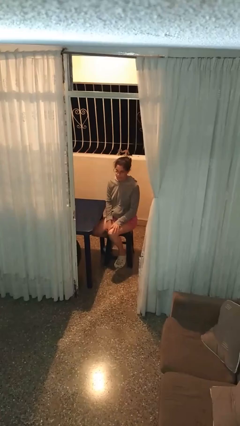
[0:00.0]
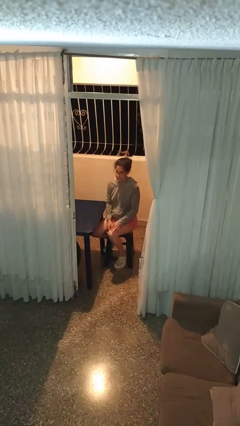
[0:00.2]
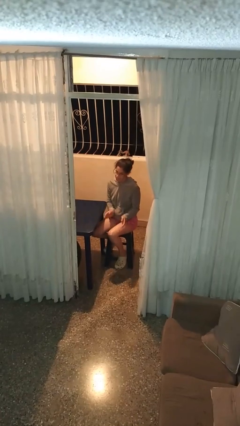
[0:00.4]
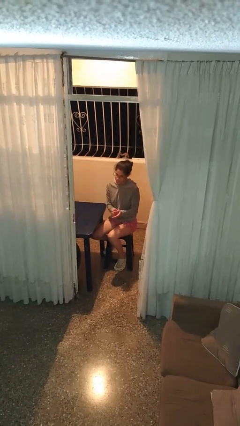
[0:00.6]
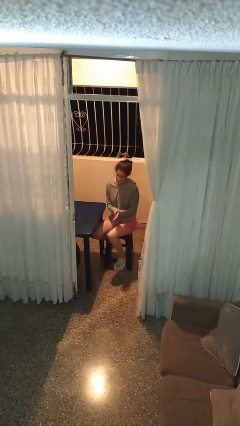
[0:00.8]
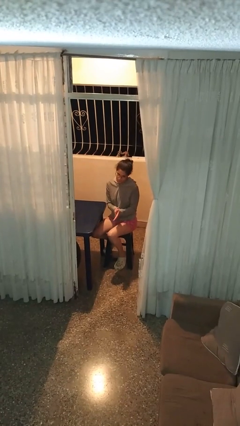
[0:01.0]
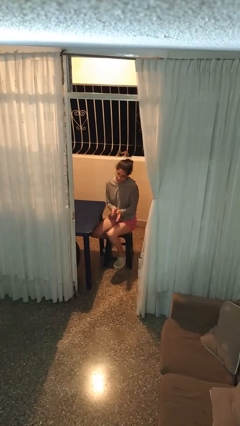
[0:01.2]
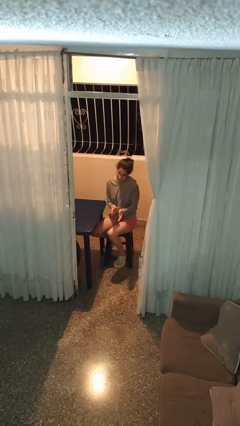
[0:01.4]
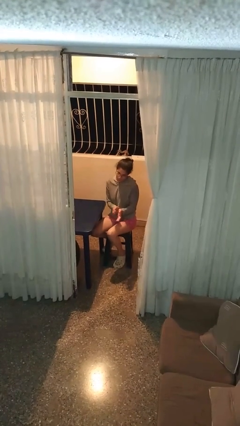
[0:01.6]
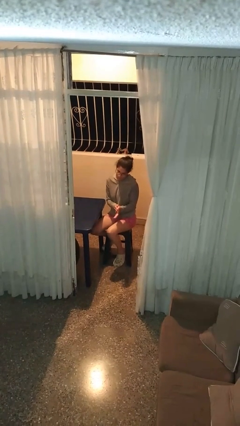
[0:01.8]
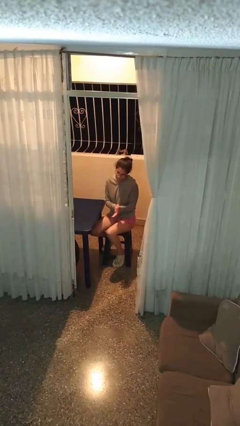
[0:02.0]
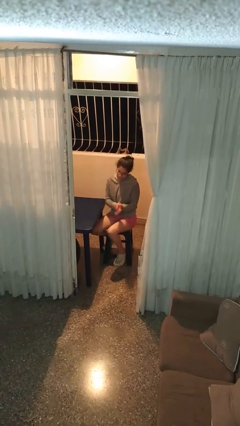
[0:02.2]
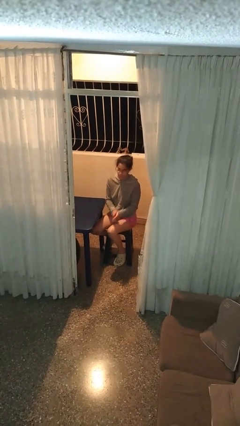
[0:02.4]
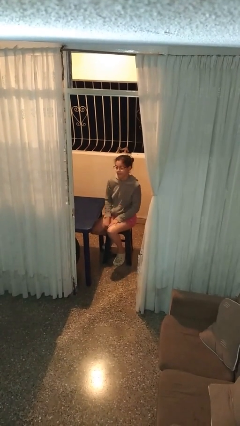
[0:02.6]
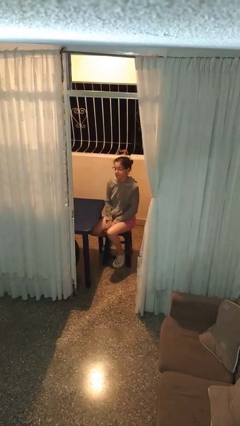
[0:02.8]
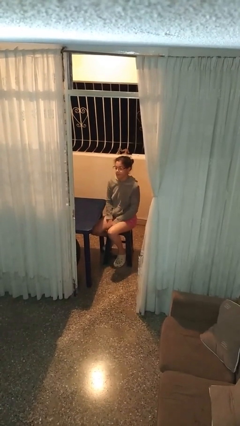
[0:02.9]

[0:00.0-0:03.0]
person claps hands

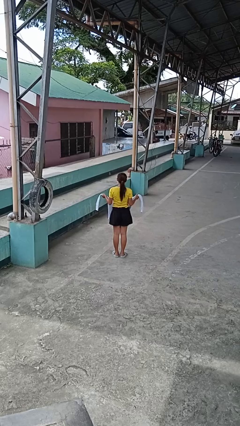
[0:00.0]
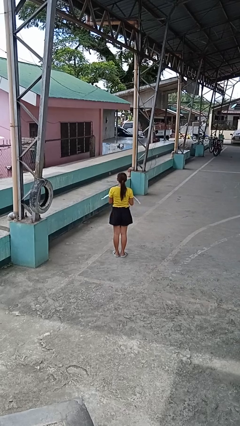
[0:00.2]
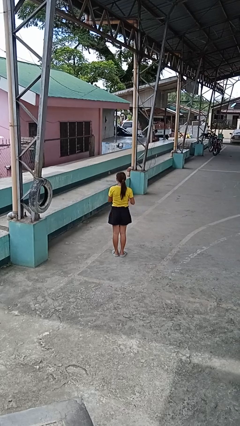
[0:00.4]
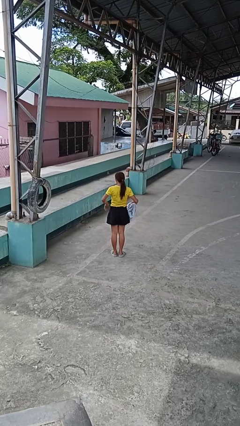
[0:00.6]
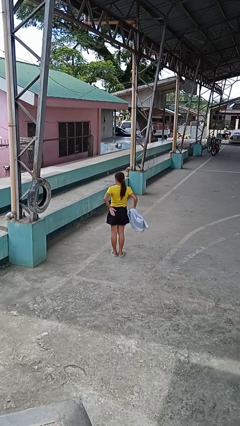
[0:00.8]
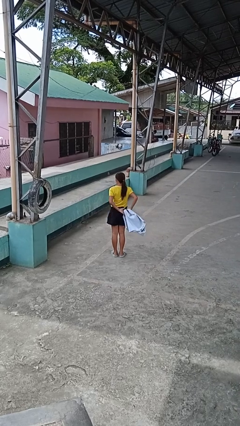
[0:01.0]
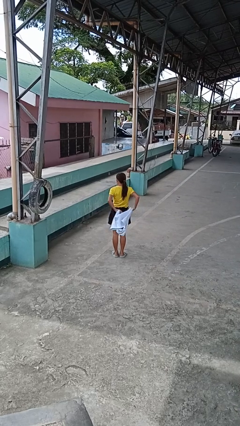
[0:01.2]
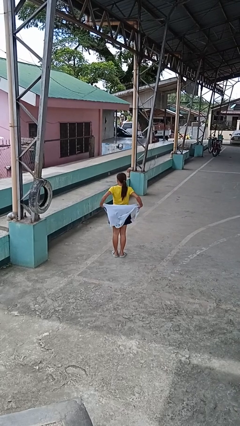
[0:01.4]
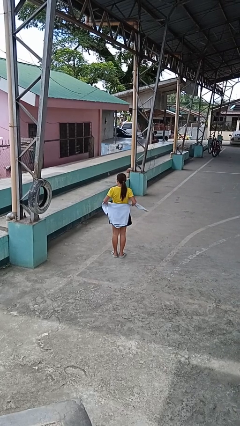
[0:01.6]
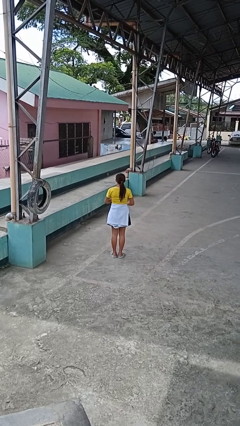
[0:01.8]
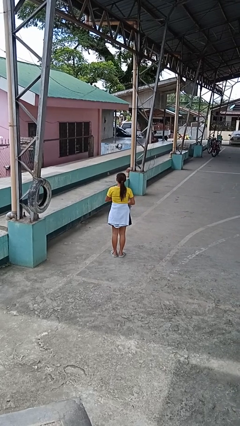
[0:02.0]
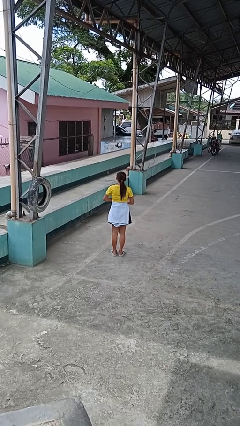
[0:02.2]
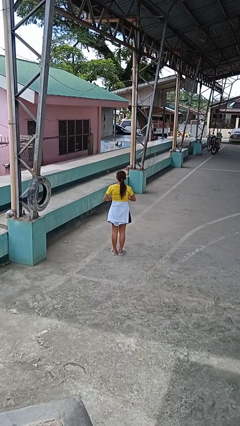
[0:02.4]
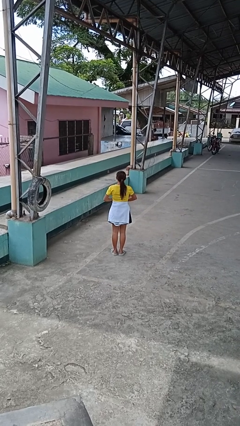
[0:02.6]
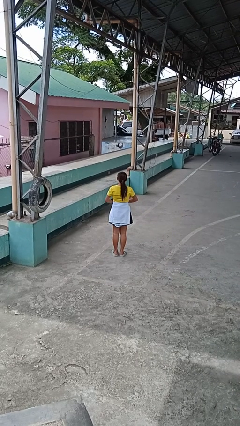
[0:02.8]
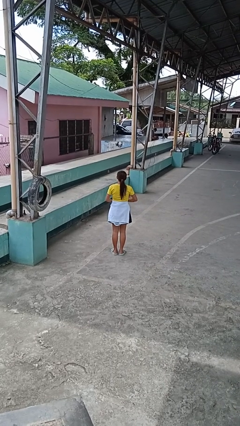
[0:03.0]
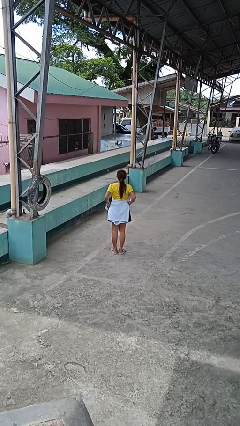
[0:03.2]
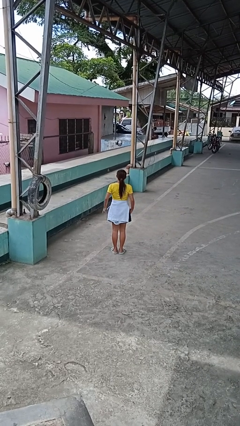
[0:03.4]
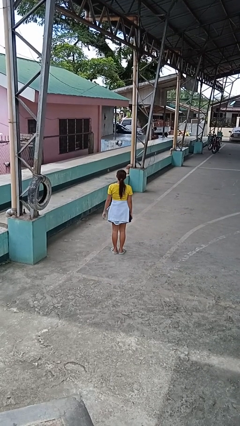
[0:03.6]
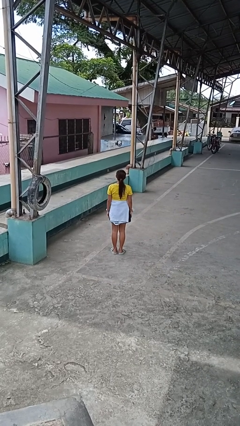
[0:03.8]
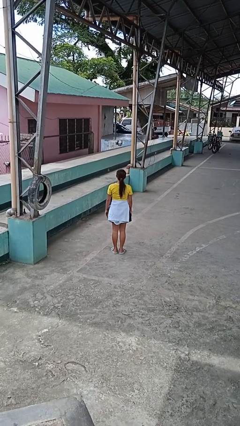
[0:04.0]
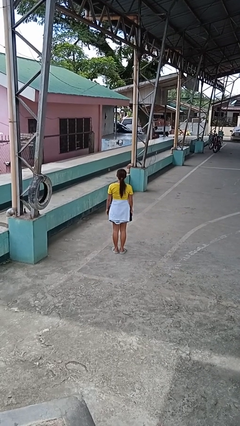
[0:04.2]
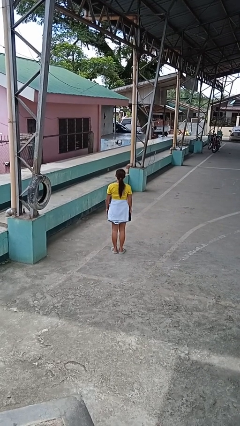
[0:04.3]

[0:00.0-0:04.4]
person ties jacket around waist

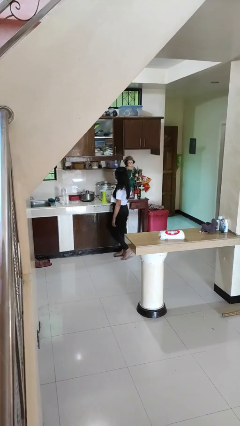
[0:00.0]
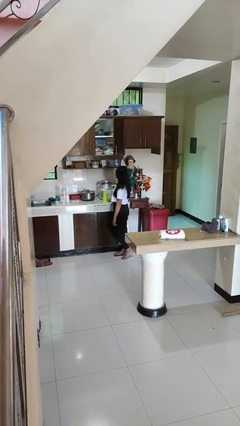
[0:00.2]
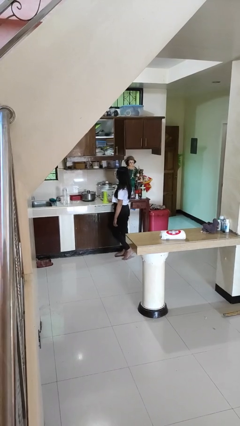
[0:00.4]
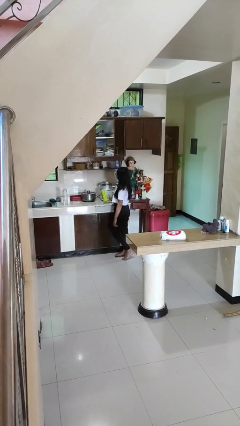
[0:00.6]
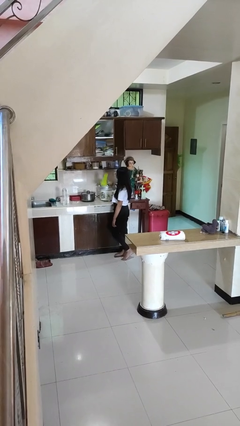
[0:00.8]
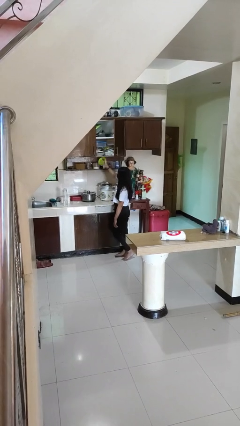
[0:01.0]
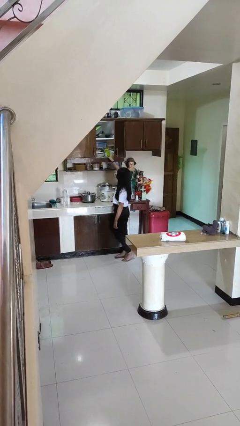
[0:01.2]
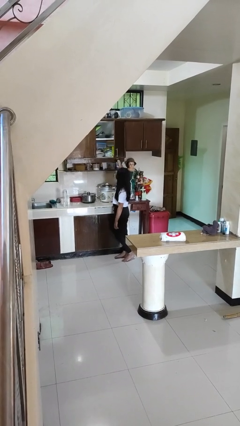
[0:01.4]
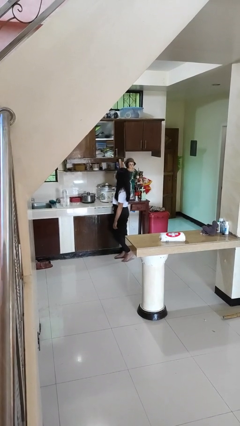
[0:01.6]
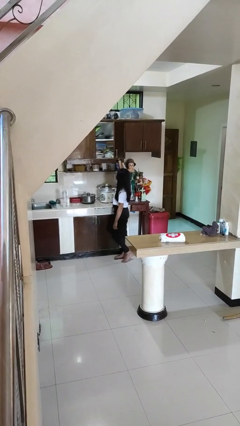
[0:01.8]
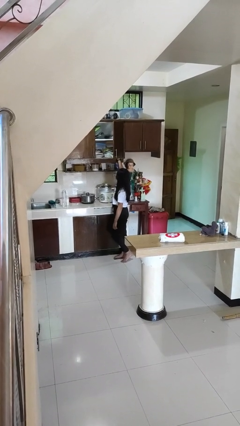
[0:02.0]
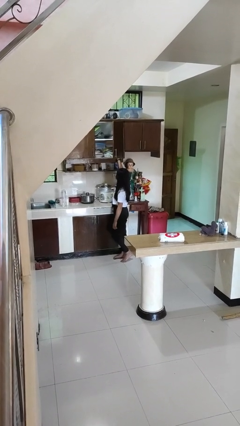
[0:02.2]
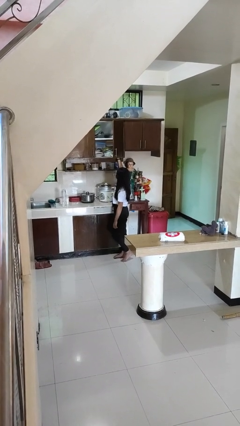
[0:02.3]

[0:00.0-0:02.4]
person puts down object into cabinet

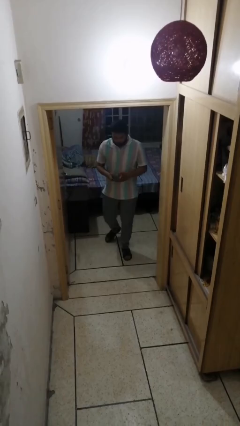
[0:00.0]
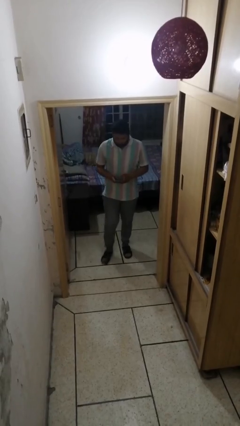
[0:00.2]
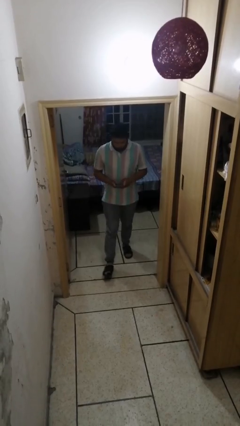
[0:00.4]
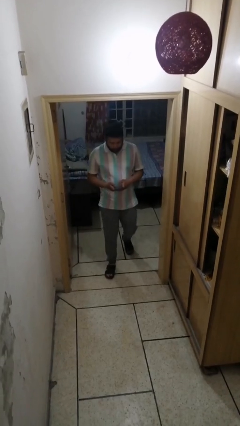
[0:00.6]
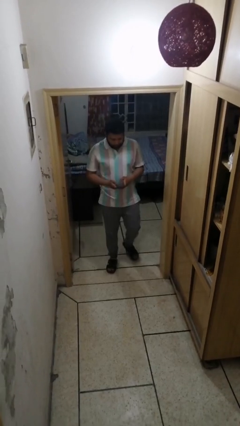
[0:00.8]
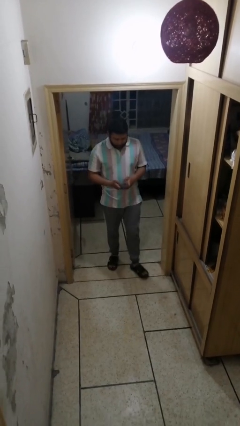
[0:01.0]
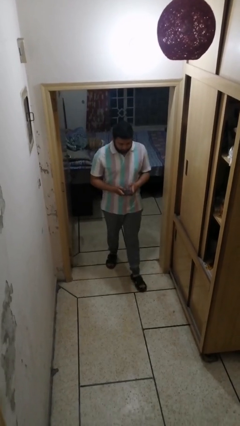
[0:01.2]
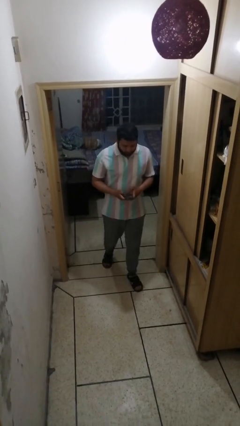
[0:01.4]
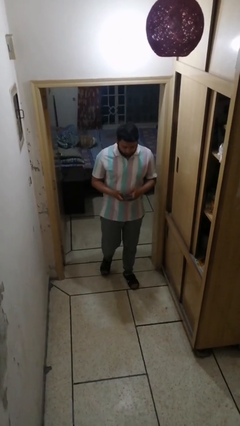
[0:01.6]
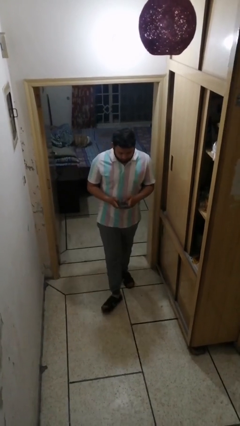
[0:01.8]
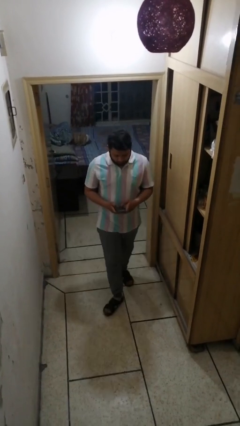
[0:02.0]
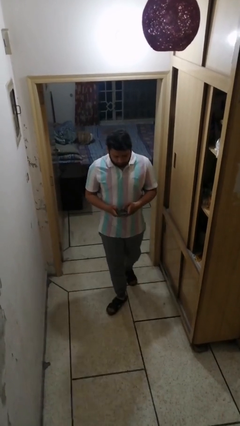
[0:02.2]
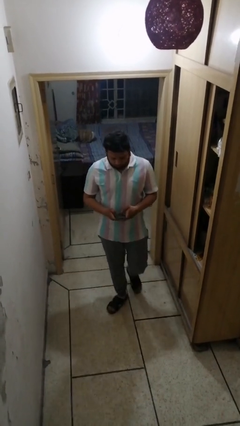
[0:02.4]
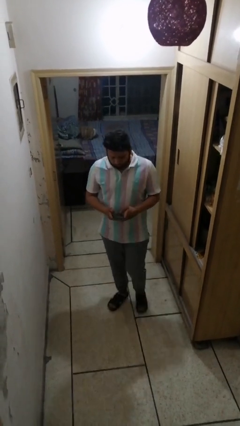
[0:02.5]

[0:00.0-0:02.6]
person enters scene through structure

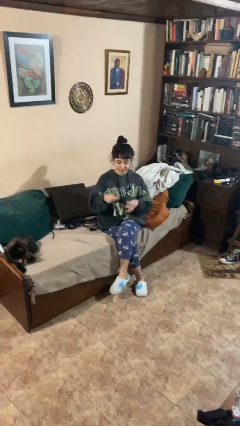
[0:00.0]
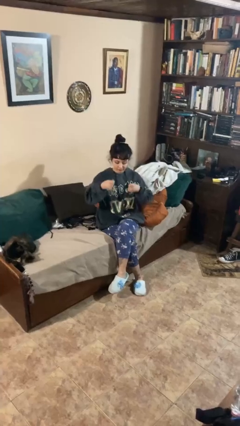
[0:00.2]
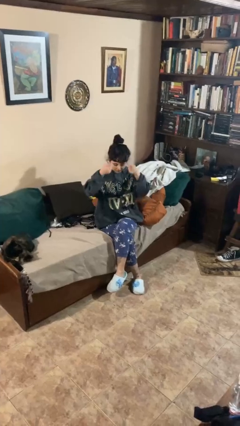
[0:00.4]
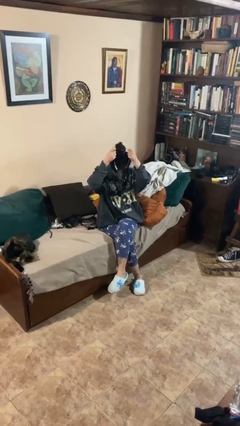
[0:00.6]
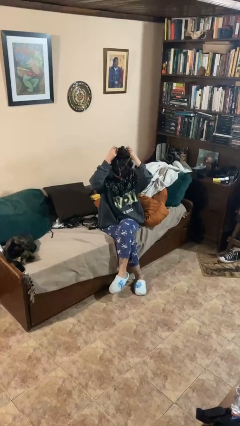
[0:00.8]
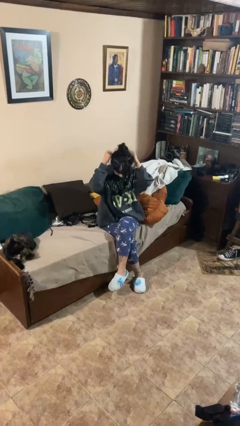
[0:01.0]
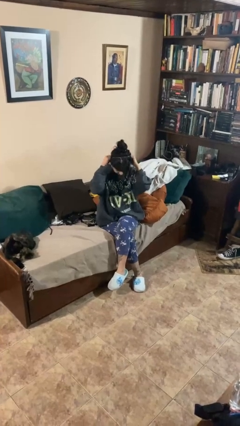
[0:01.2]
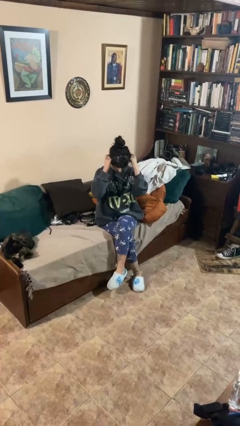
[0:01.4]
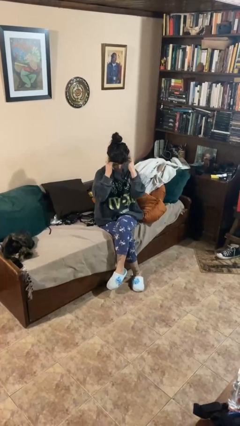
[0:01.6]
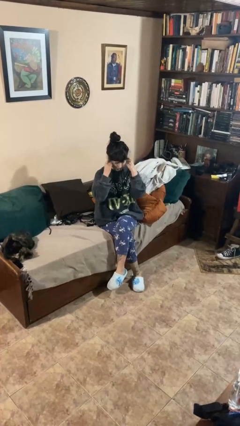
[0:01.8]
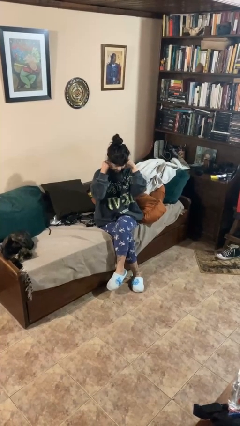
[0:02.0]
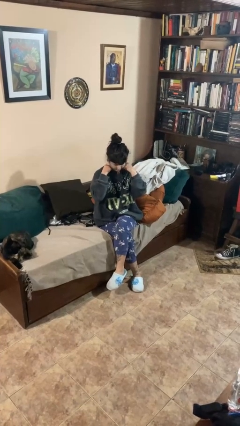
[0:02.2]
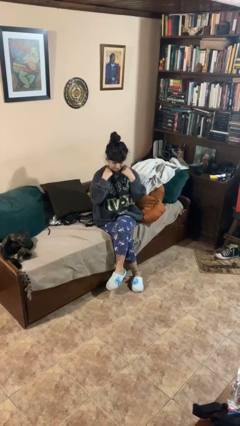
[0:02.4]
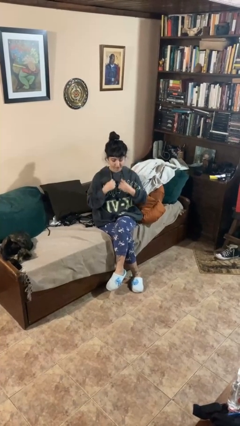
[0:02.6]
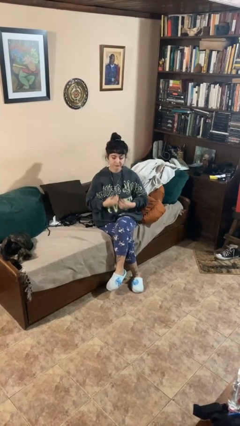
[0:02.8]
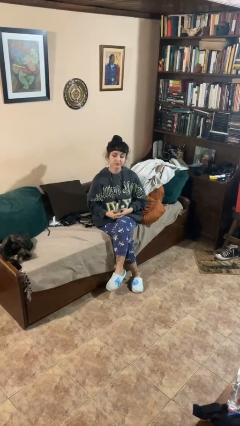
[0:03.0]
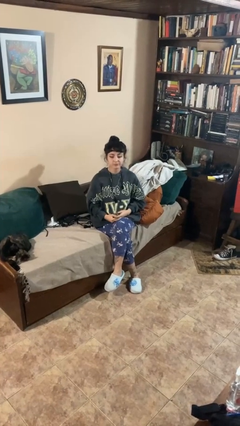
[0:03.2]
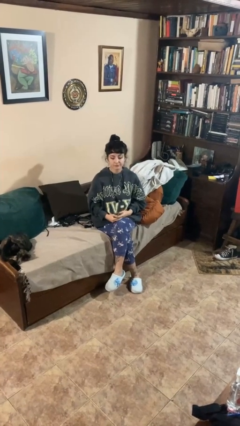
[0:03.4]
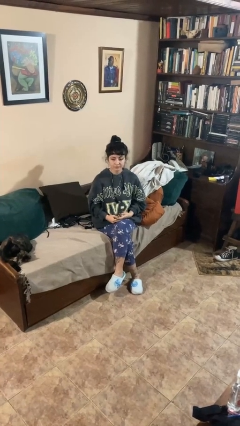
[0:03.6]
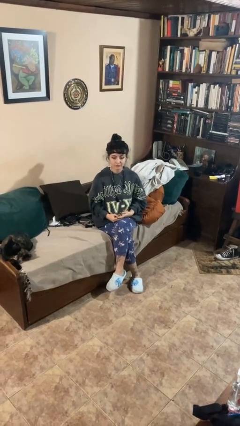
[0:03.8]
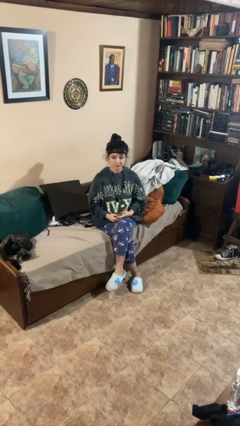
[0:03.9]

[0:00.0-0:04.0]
person puts on necklace

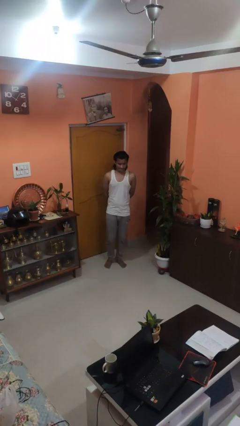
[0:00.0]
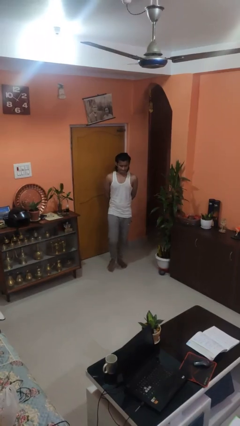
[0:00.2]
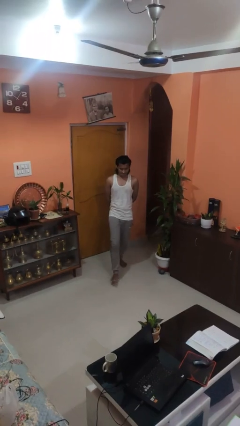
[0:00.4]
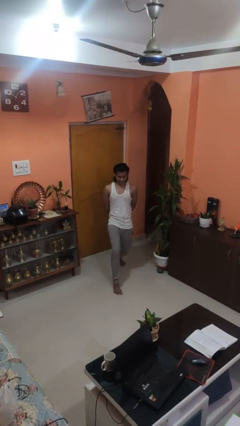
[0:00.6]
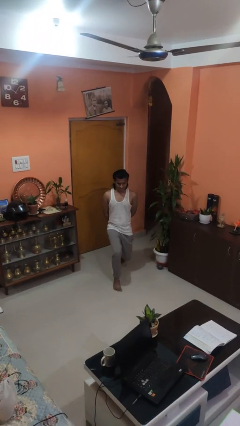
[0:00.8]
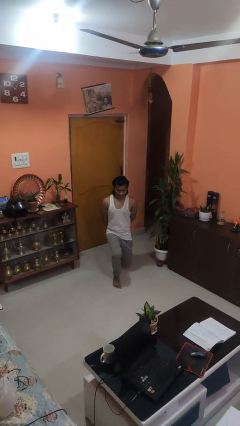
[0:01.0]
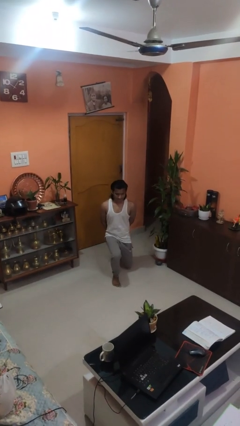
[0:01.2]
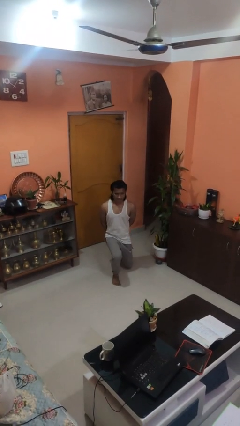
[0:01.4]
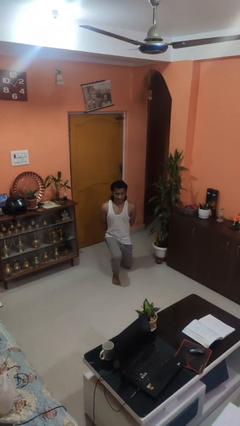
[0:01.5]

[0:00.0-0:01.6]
person kneels
